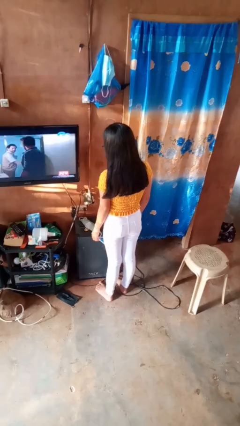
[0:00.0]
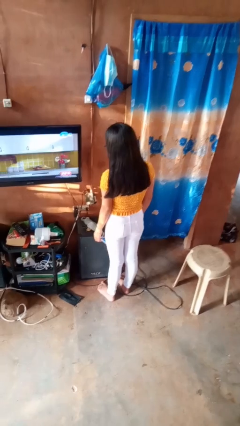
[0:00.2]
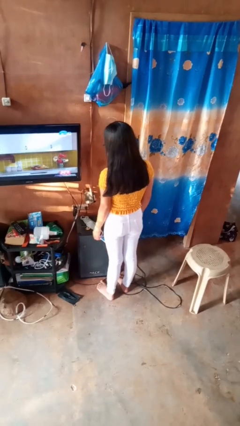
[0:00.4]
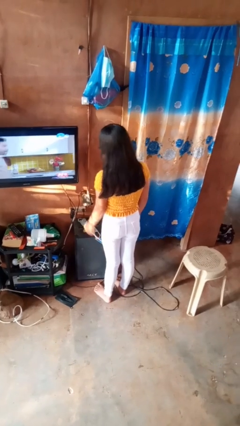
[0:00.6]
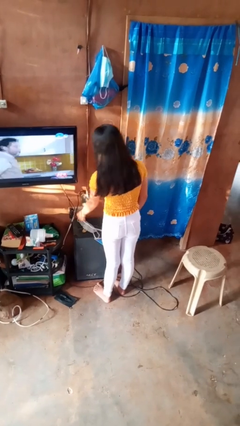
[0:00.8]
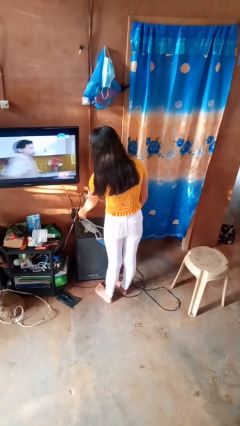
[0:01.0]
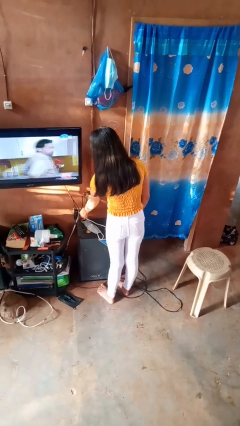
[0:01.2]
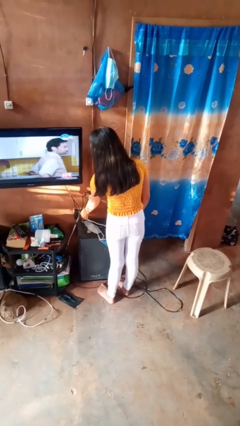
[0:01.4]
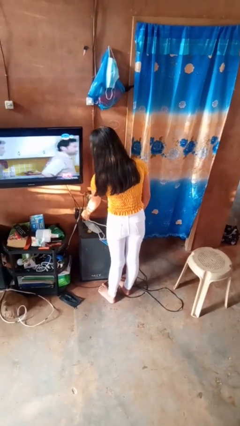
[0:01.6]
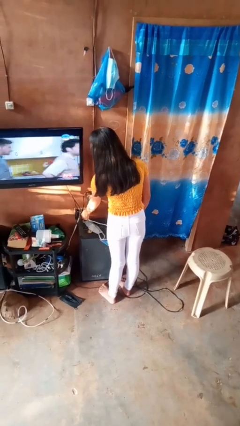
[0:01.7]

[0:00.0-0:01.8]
person plugs into electrical socket

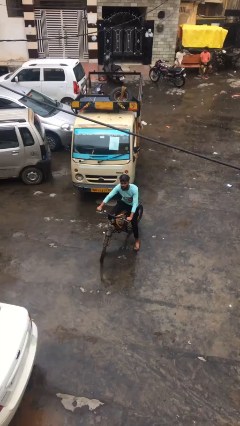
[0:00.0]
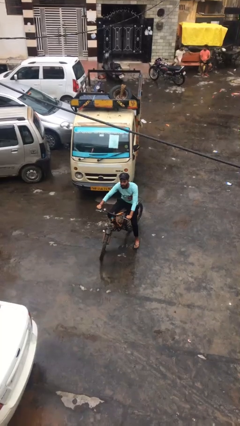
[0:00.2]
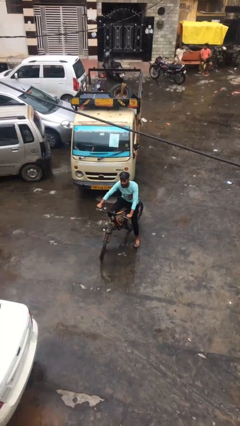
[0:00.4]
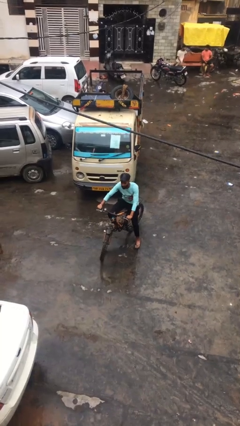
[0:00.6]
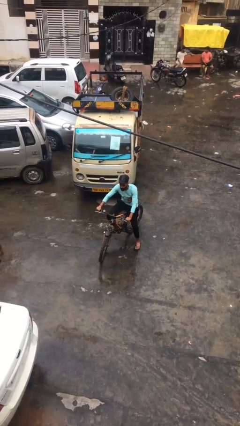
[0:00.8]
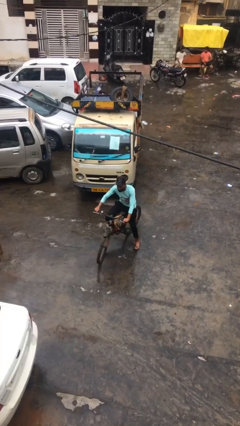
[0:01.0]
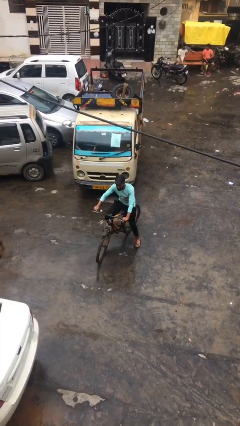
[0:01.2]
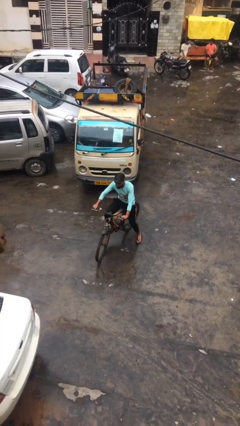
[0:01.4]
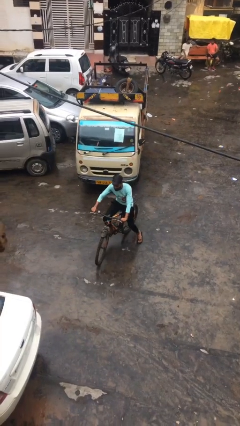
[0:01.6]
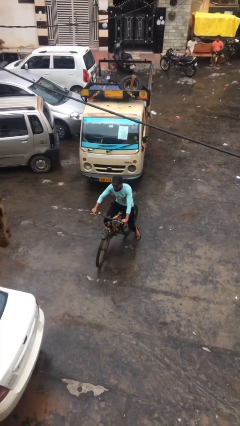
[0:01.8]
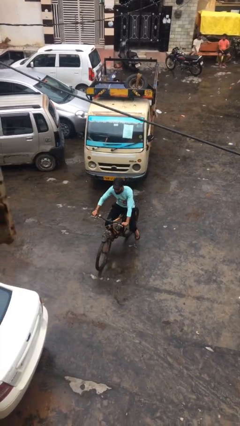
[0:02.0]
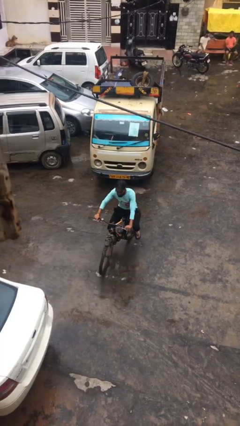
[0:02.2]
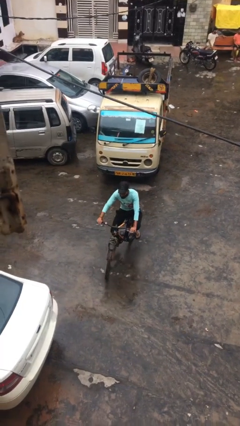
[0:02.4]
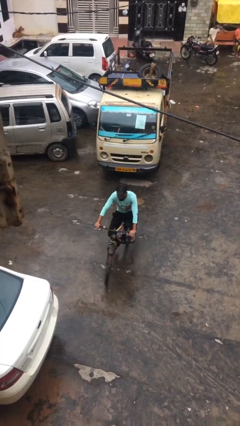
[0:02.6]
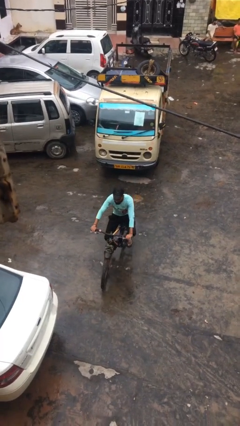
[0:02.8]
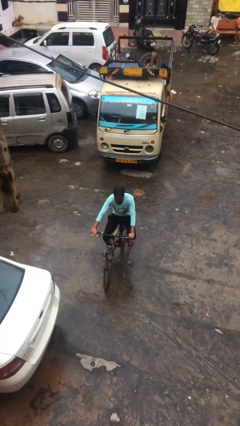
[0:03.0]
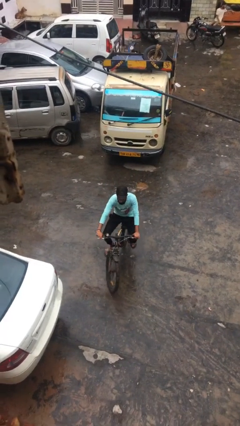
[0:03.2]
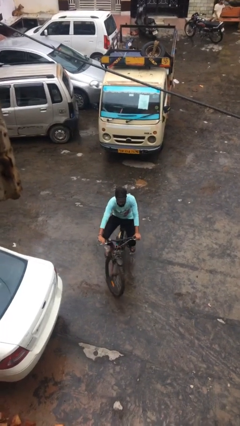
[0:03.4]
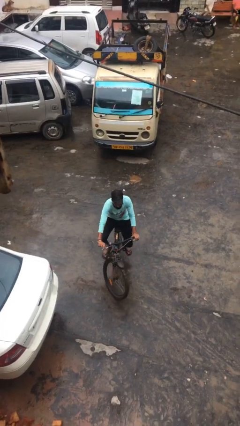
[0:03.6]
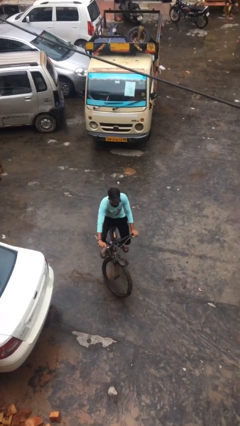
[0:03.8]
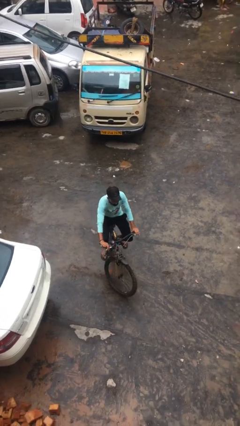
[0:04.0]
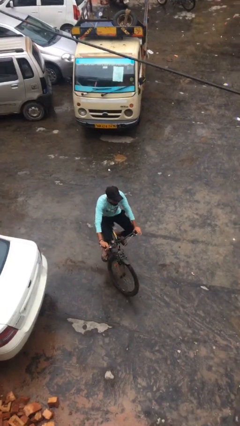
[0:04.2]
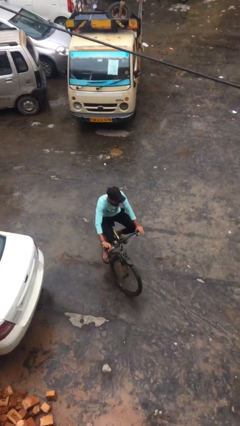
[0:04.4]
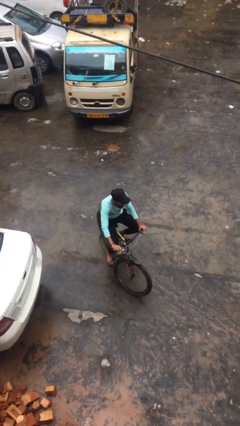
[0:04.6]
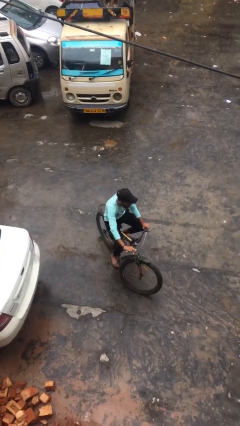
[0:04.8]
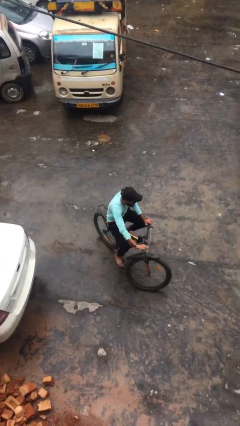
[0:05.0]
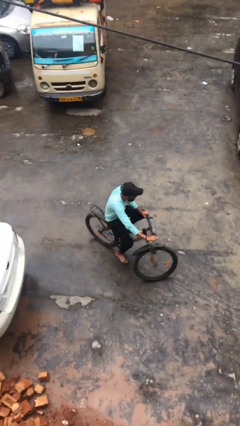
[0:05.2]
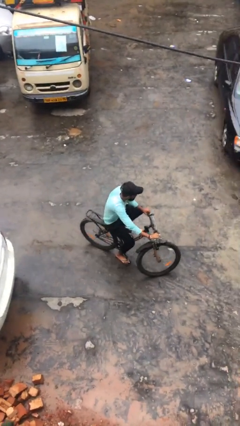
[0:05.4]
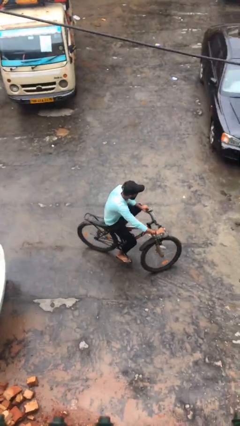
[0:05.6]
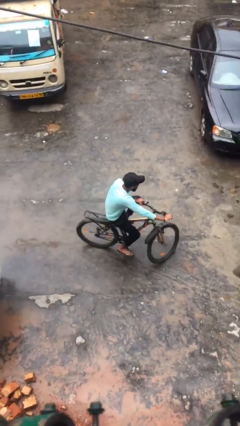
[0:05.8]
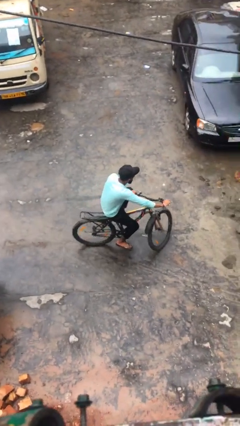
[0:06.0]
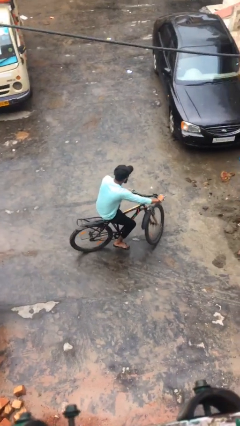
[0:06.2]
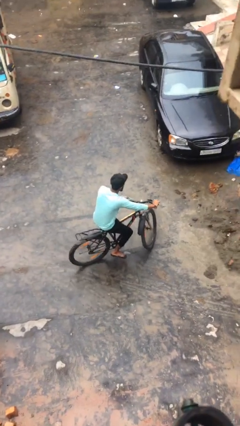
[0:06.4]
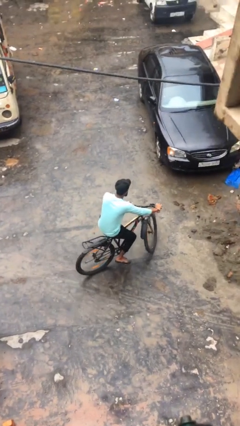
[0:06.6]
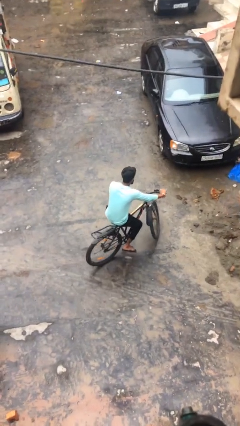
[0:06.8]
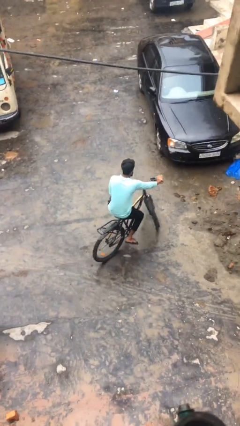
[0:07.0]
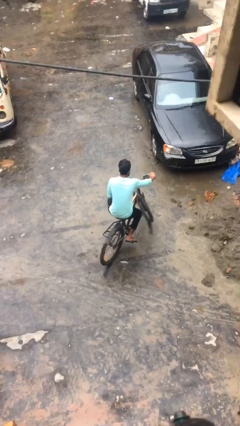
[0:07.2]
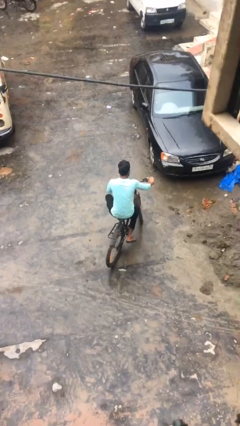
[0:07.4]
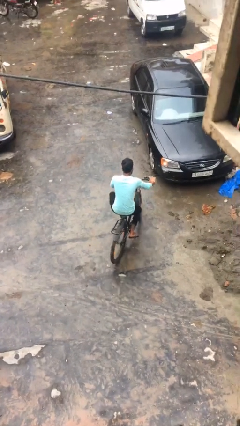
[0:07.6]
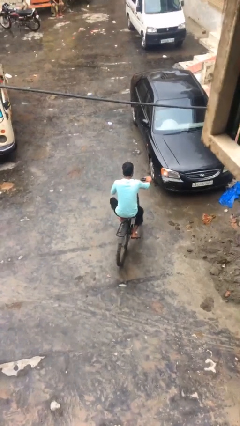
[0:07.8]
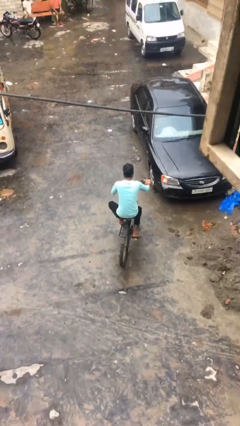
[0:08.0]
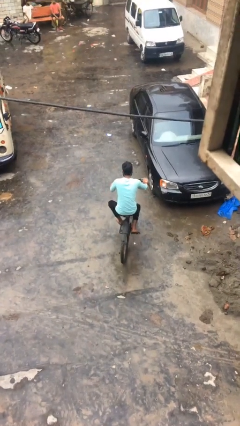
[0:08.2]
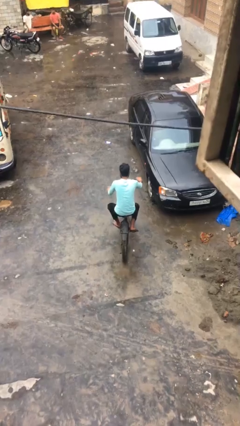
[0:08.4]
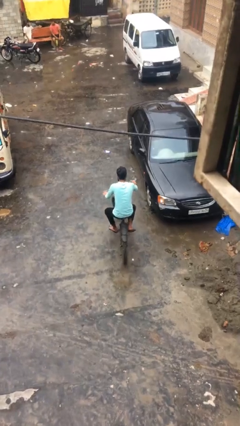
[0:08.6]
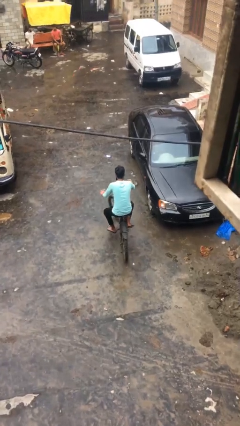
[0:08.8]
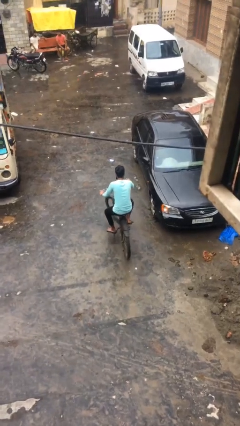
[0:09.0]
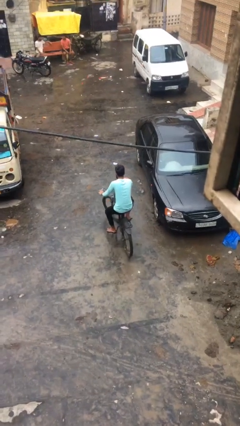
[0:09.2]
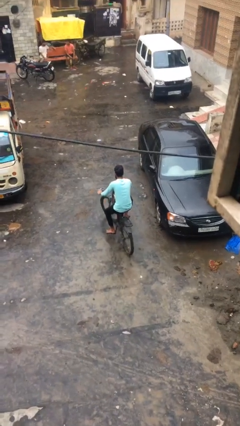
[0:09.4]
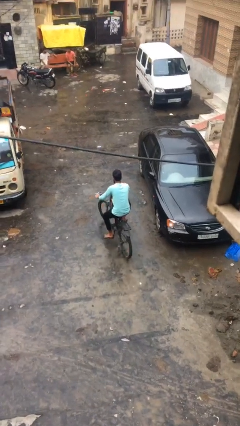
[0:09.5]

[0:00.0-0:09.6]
person rides bicycle

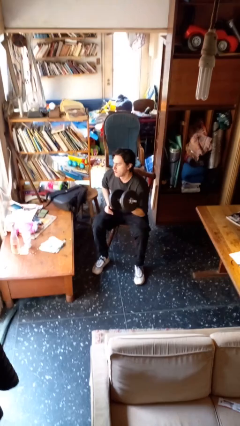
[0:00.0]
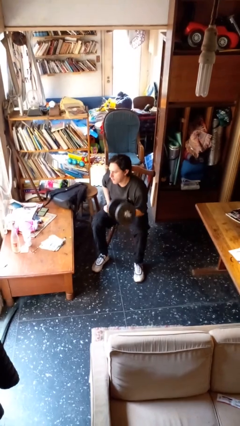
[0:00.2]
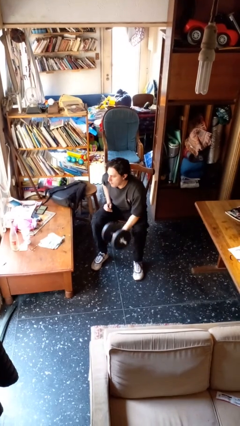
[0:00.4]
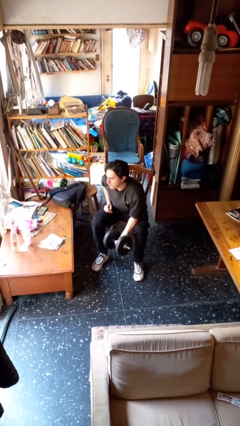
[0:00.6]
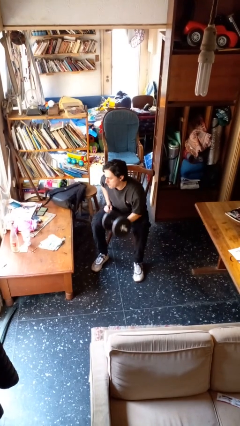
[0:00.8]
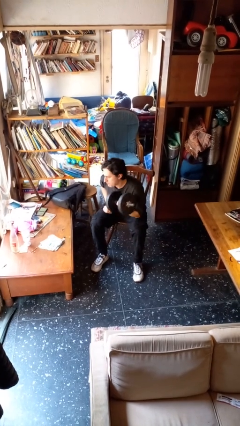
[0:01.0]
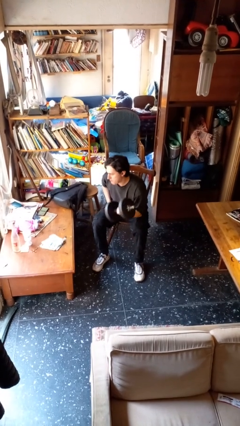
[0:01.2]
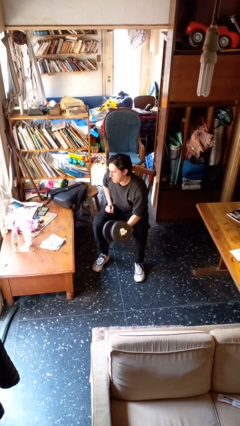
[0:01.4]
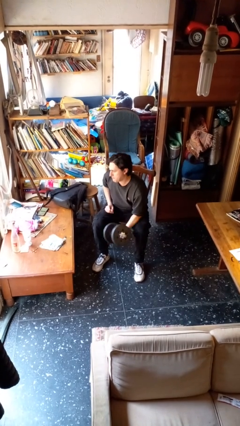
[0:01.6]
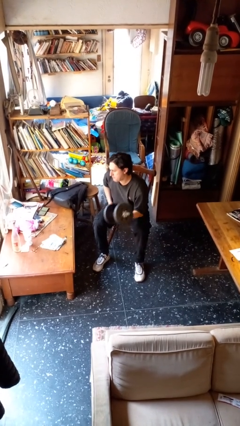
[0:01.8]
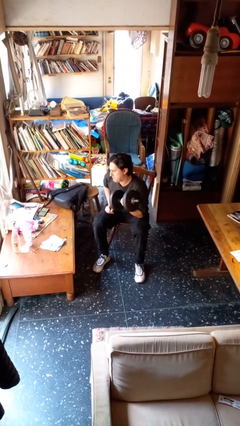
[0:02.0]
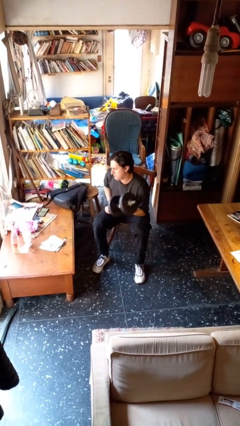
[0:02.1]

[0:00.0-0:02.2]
person lifts dumbbells

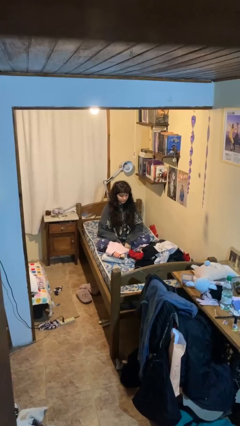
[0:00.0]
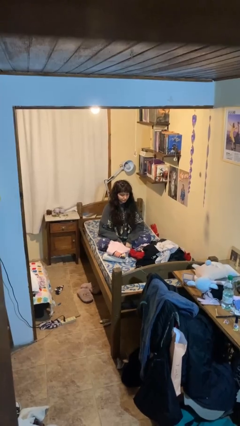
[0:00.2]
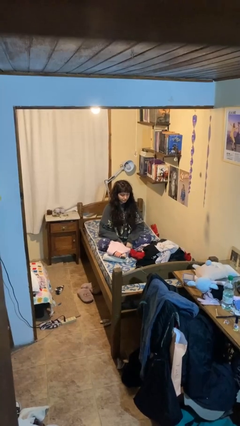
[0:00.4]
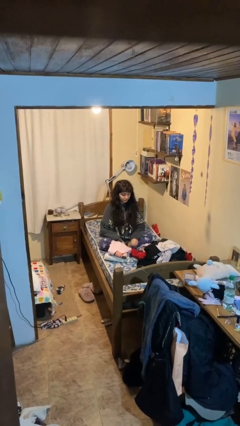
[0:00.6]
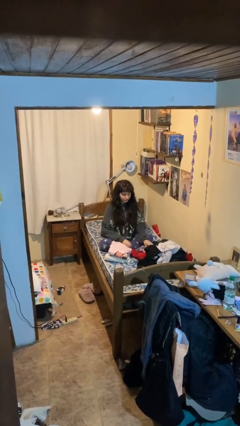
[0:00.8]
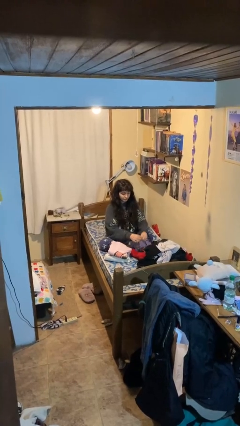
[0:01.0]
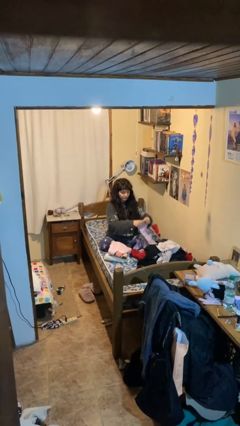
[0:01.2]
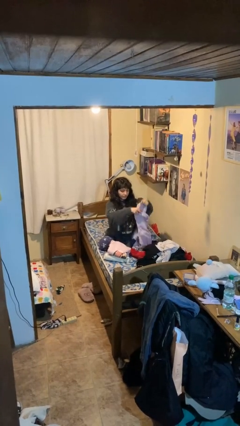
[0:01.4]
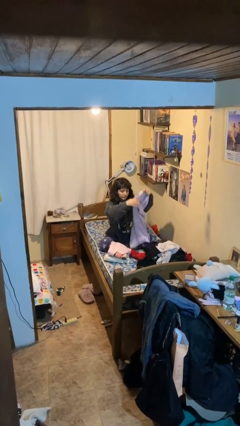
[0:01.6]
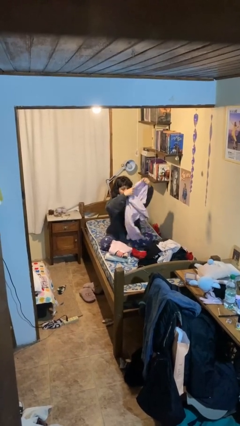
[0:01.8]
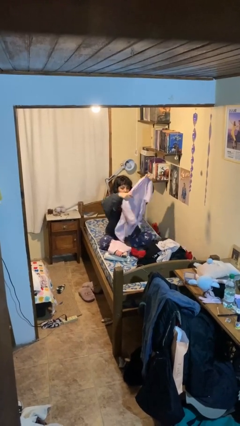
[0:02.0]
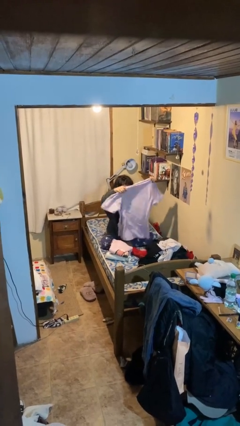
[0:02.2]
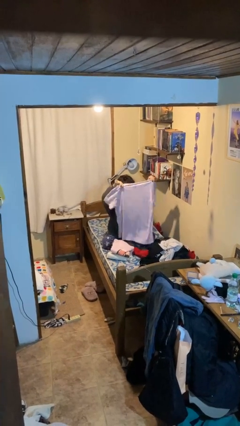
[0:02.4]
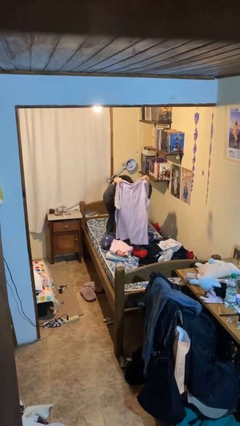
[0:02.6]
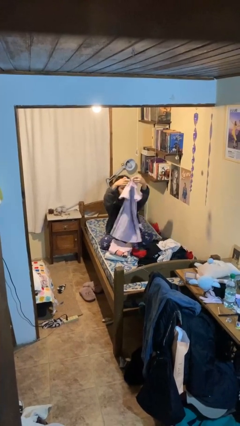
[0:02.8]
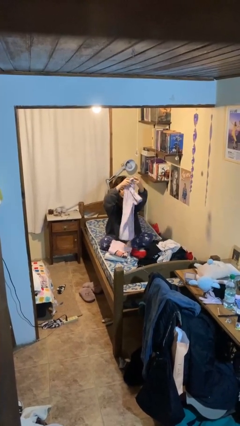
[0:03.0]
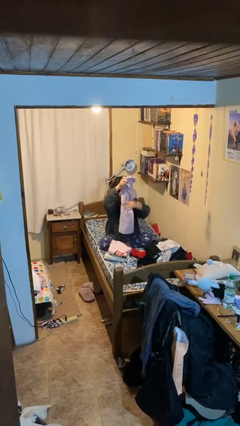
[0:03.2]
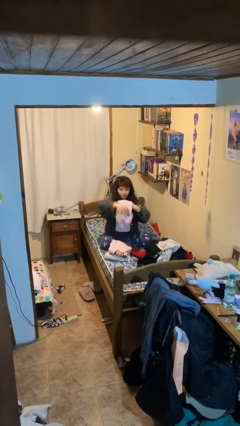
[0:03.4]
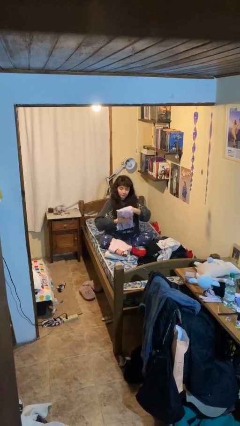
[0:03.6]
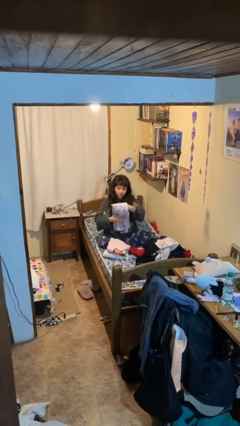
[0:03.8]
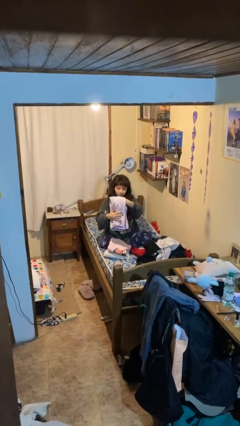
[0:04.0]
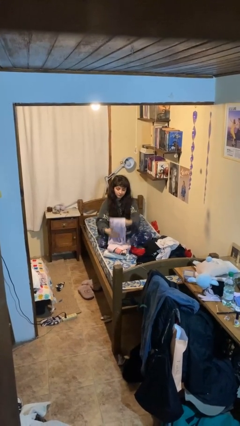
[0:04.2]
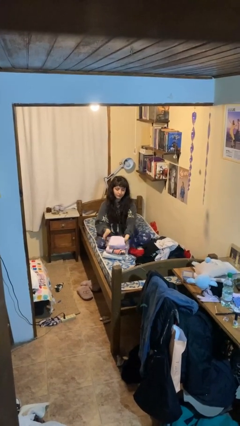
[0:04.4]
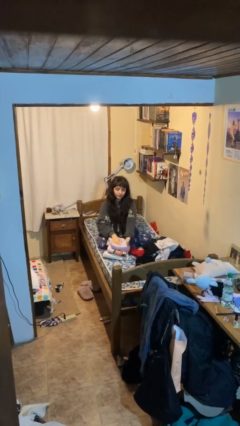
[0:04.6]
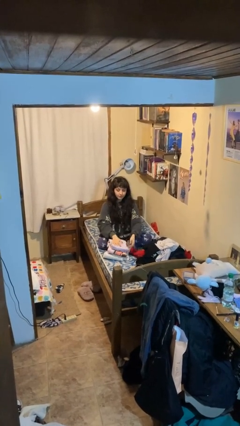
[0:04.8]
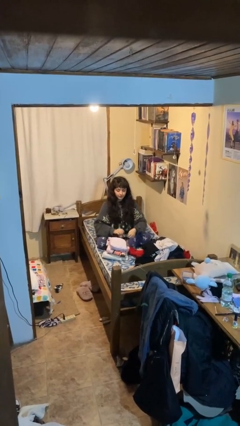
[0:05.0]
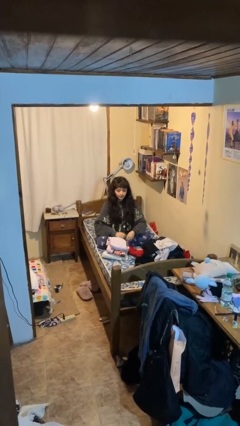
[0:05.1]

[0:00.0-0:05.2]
person folds shirt
